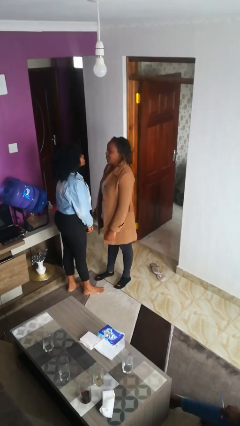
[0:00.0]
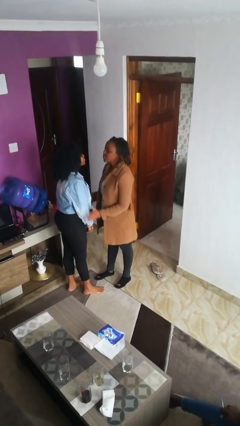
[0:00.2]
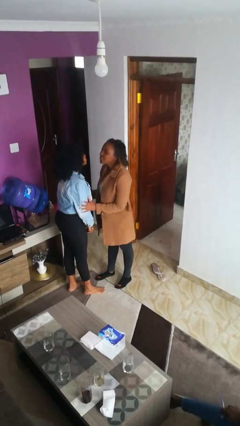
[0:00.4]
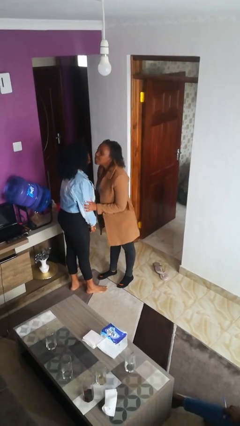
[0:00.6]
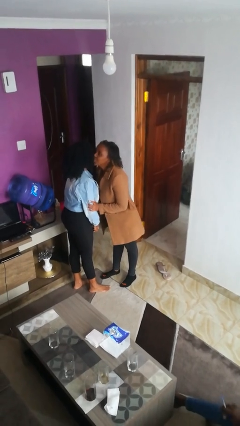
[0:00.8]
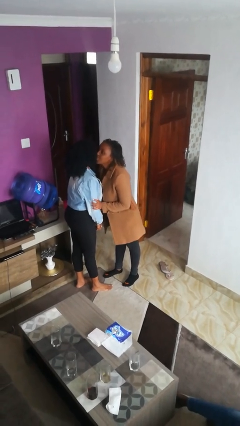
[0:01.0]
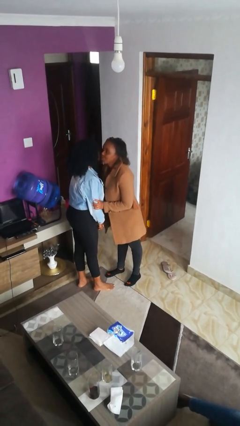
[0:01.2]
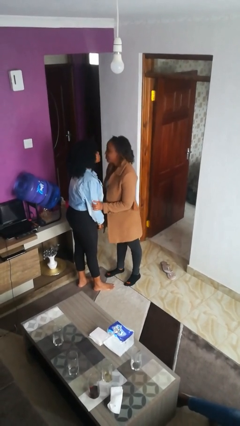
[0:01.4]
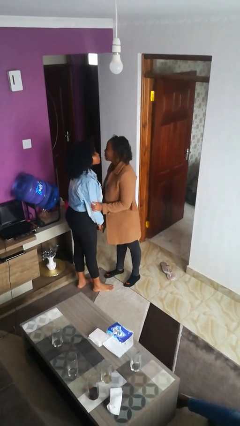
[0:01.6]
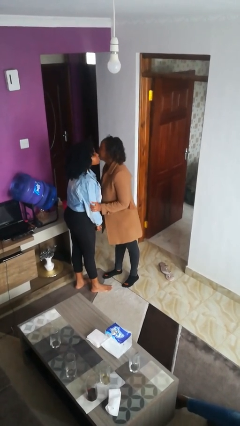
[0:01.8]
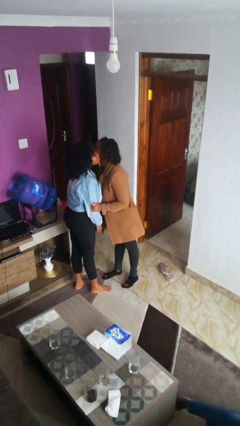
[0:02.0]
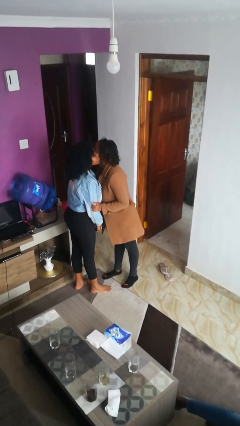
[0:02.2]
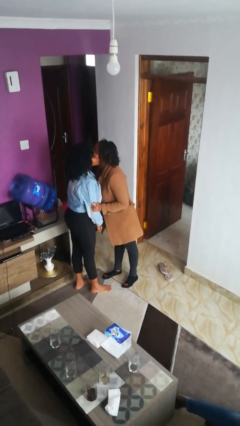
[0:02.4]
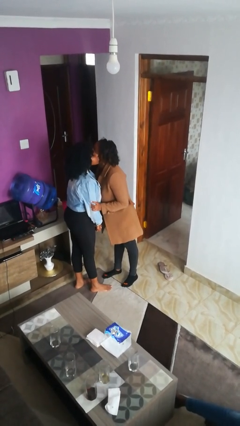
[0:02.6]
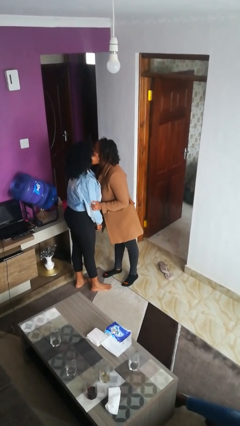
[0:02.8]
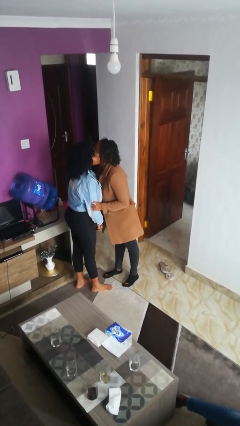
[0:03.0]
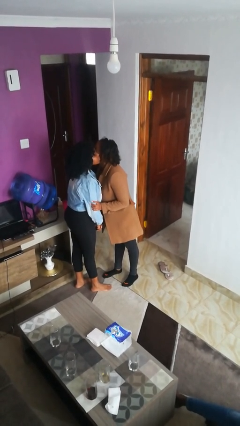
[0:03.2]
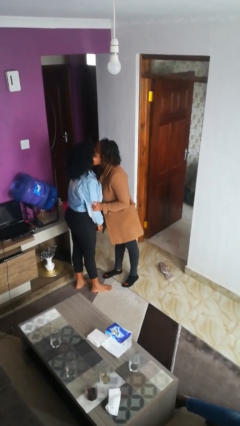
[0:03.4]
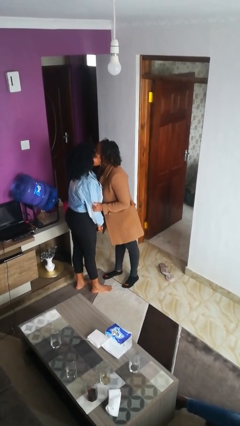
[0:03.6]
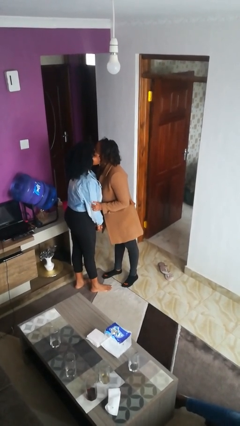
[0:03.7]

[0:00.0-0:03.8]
person kisses cheek of person

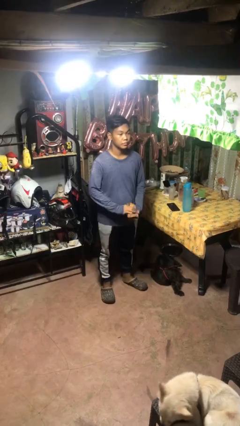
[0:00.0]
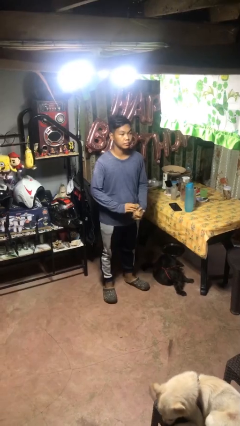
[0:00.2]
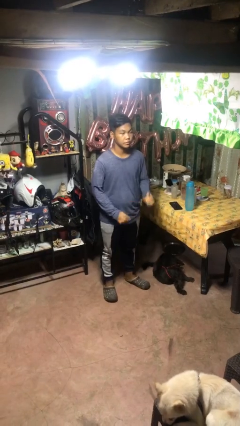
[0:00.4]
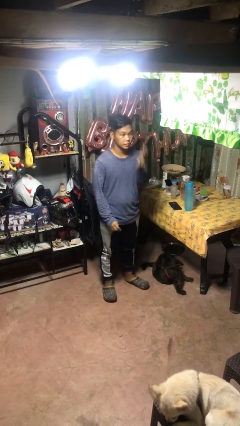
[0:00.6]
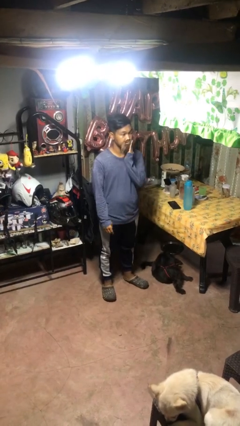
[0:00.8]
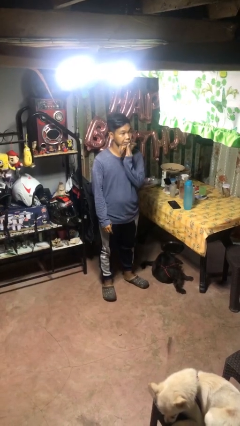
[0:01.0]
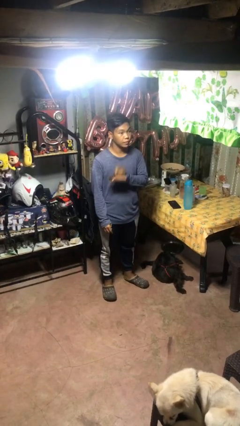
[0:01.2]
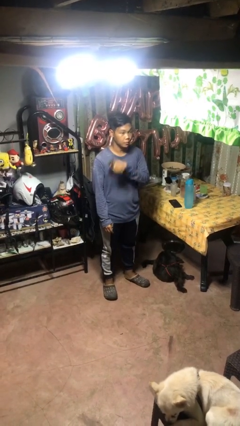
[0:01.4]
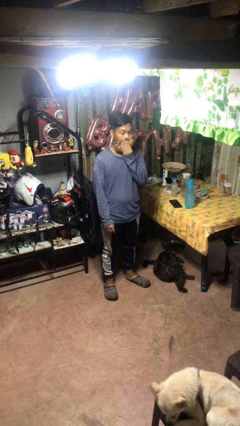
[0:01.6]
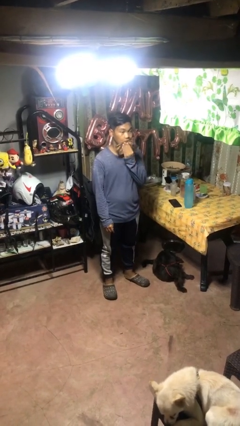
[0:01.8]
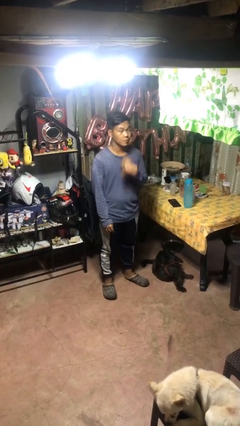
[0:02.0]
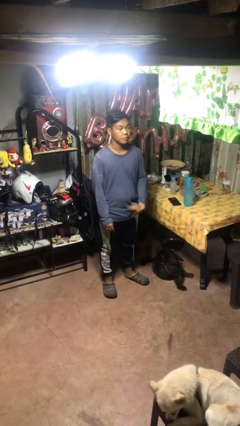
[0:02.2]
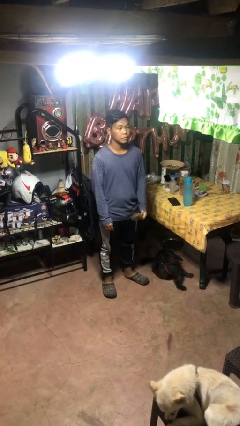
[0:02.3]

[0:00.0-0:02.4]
person wipes mouth with napkin

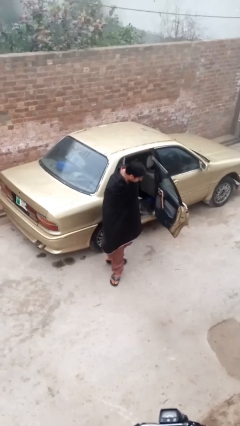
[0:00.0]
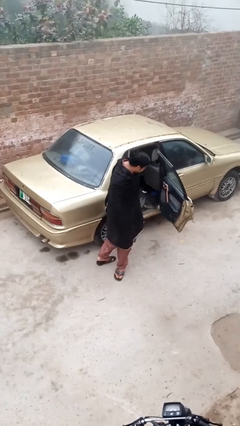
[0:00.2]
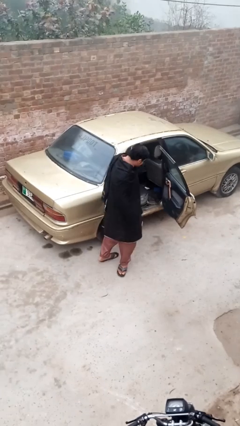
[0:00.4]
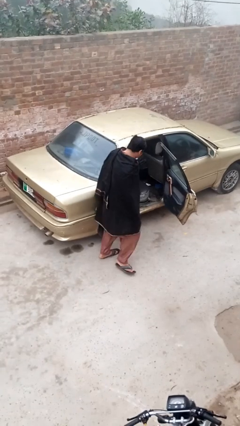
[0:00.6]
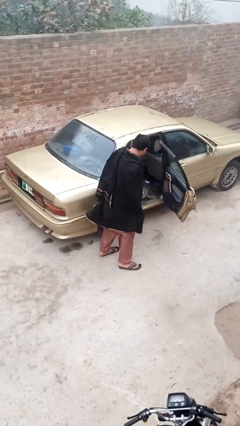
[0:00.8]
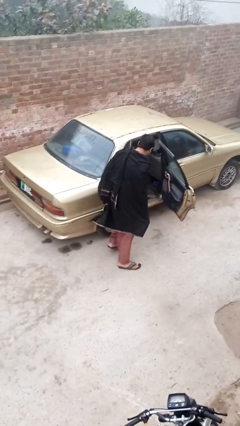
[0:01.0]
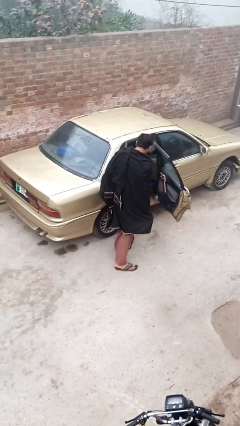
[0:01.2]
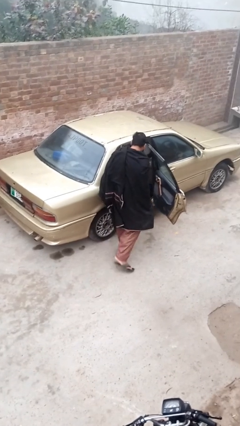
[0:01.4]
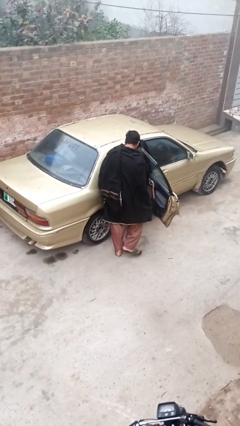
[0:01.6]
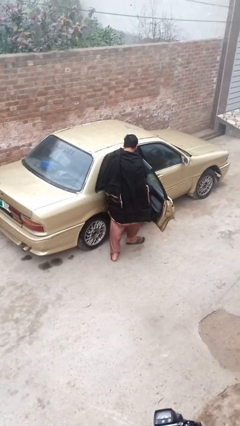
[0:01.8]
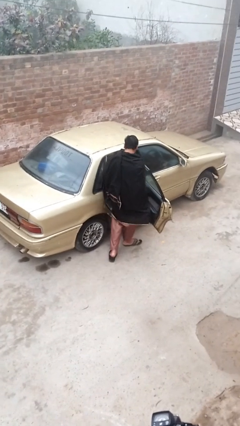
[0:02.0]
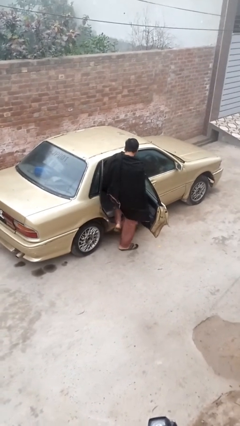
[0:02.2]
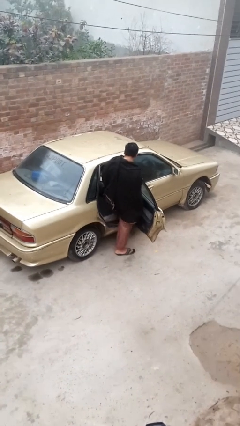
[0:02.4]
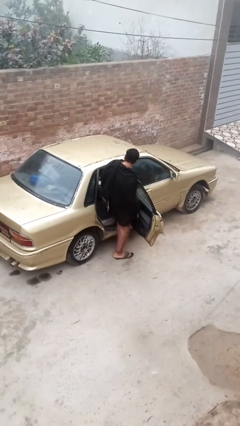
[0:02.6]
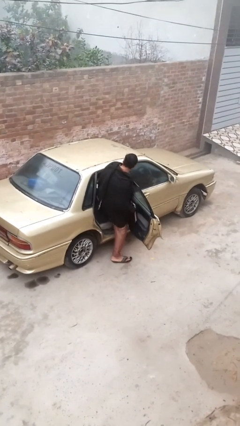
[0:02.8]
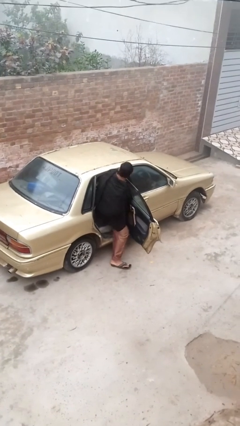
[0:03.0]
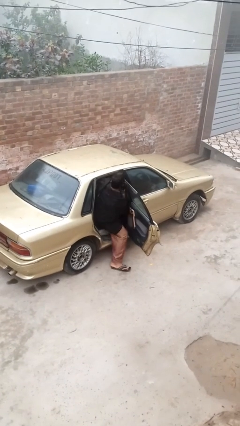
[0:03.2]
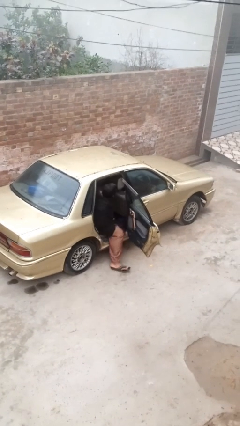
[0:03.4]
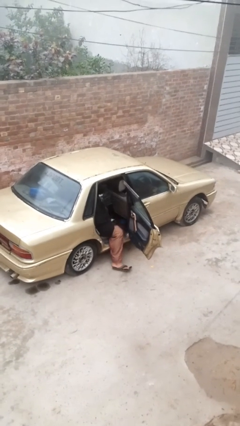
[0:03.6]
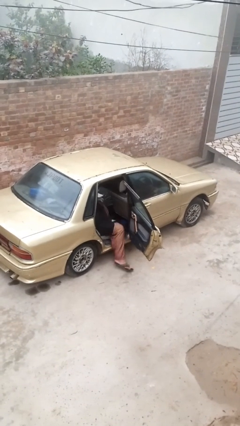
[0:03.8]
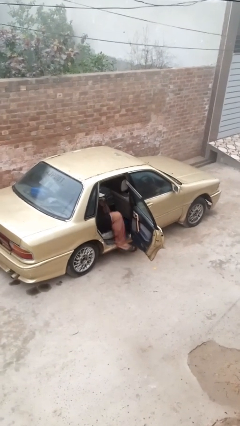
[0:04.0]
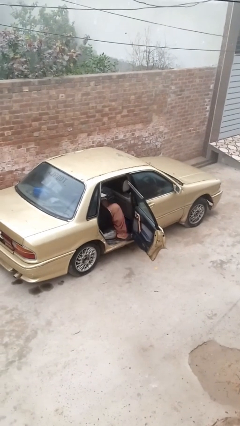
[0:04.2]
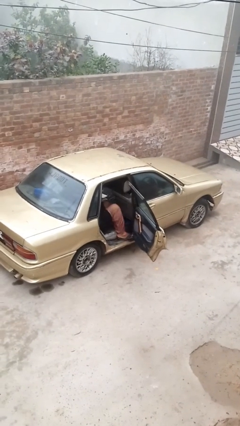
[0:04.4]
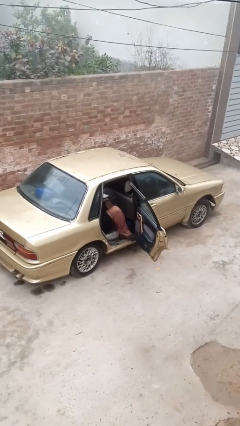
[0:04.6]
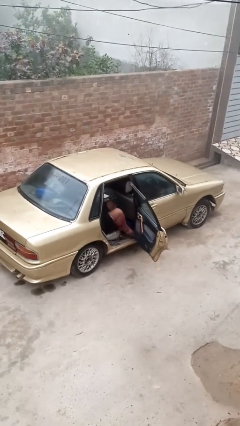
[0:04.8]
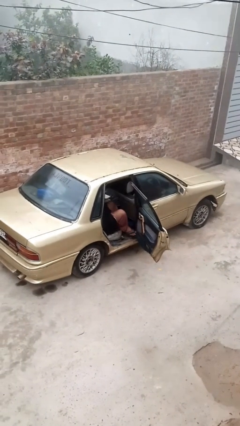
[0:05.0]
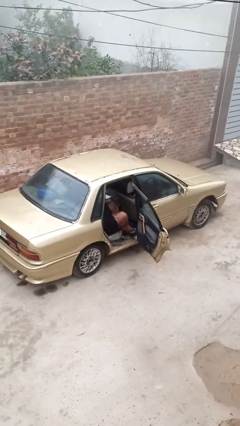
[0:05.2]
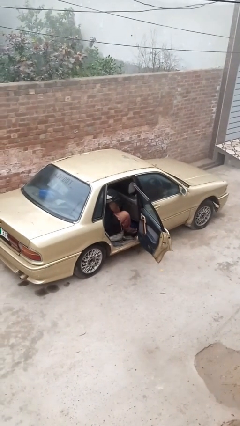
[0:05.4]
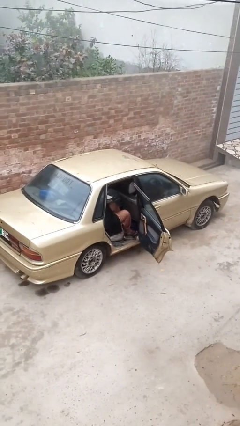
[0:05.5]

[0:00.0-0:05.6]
person enters car

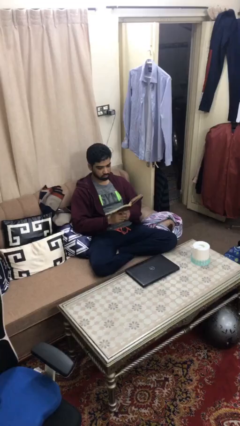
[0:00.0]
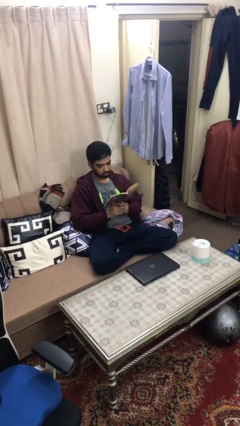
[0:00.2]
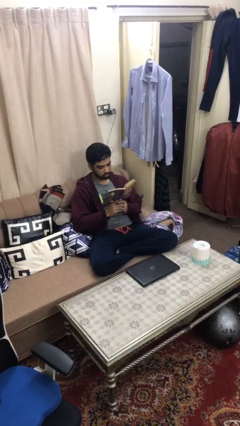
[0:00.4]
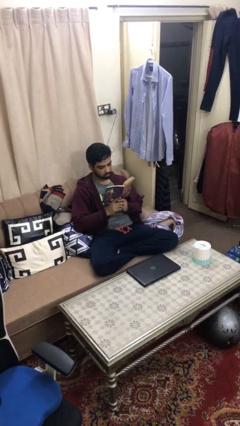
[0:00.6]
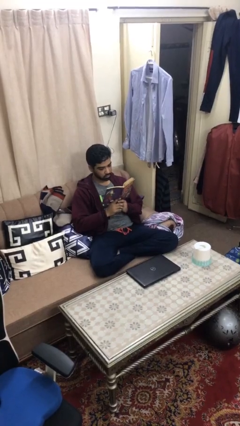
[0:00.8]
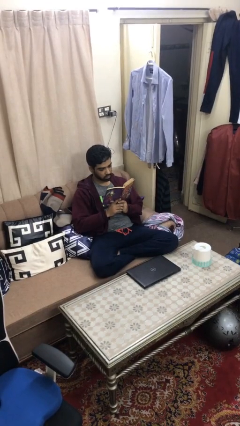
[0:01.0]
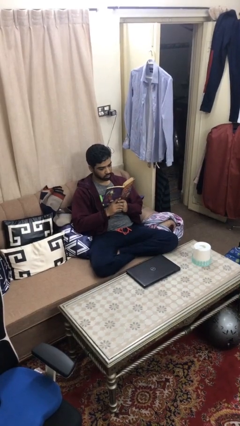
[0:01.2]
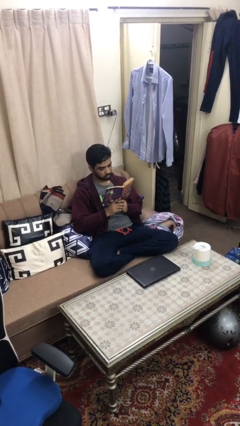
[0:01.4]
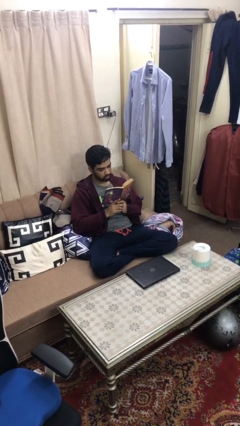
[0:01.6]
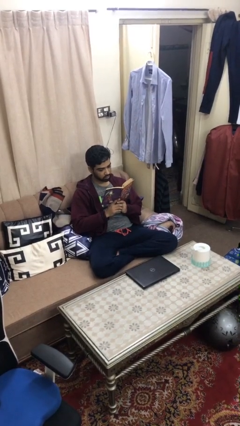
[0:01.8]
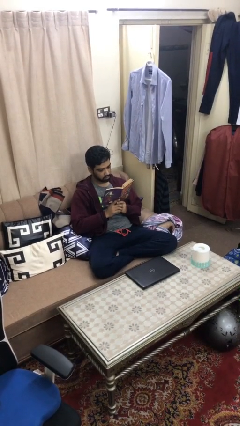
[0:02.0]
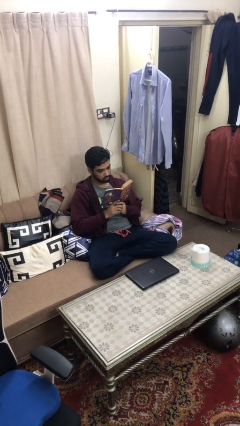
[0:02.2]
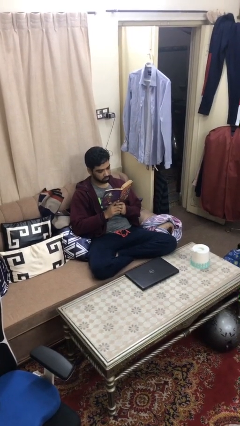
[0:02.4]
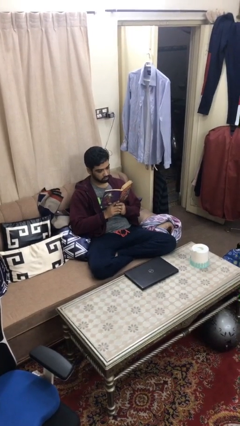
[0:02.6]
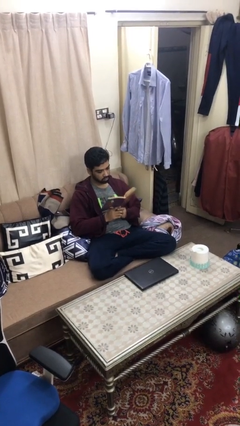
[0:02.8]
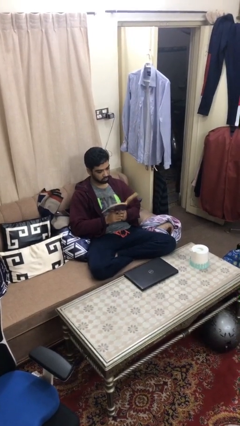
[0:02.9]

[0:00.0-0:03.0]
person reads document

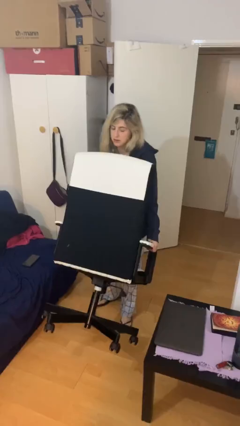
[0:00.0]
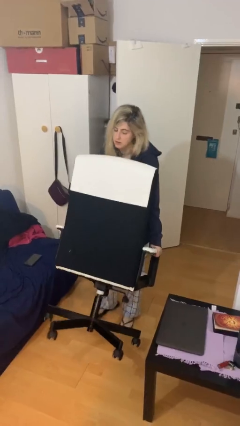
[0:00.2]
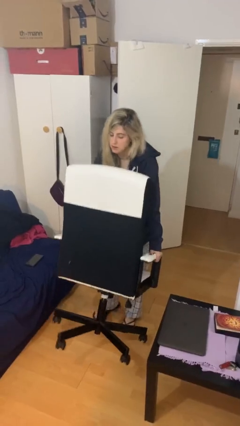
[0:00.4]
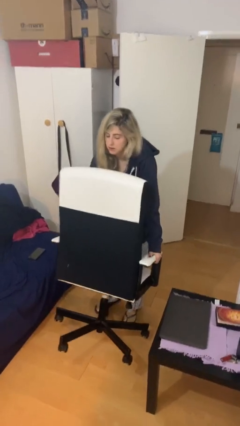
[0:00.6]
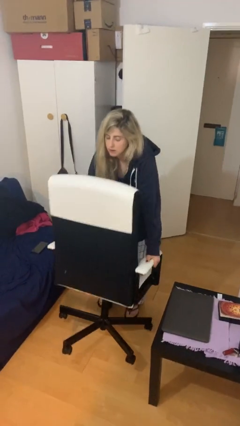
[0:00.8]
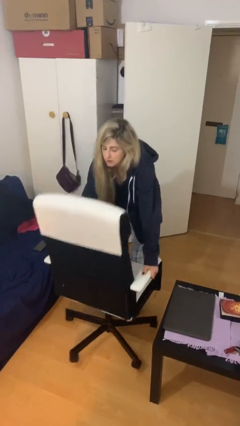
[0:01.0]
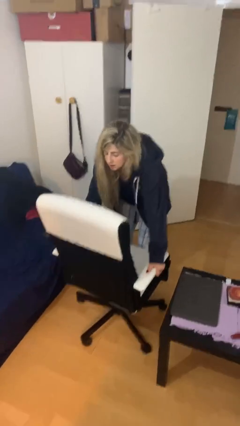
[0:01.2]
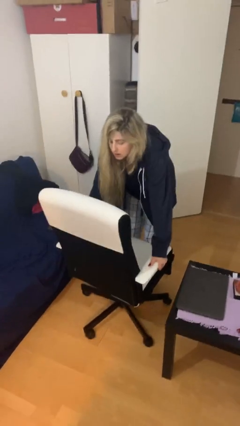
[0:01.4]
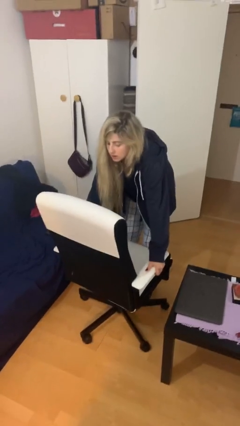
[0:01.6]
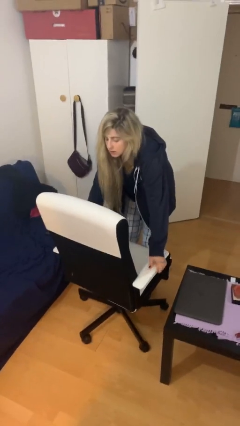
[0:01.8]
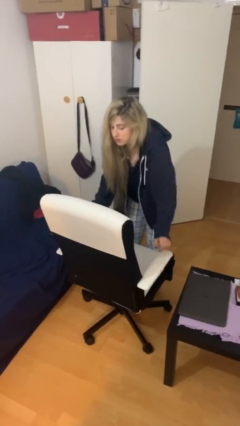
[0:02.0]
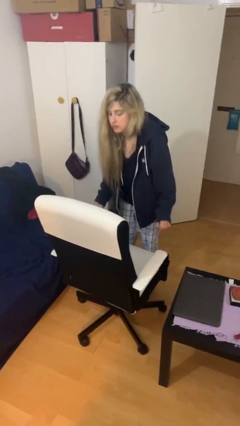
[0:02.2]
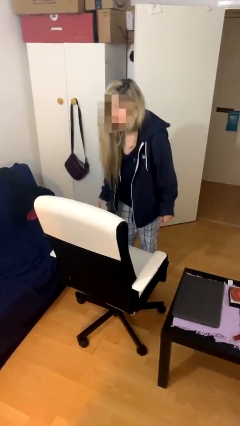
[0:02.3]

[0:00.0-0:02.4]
person puts down object on floor

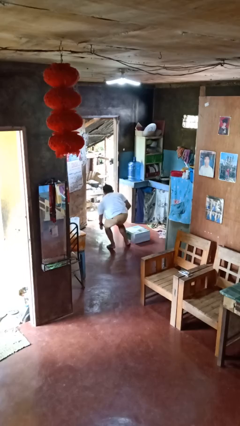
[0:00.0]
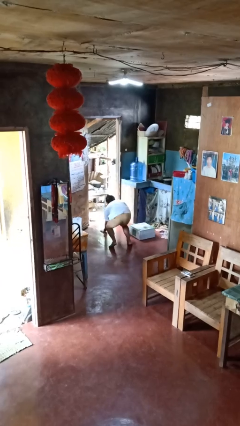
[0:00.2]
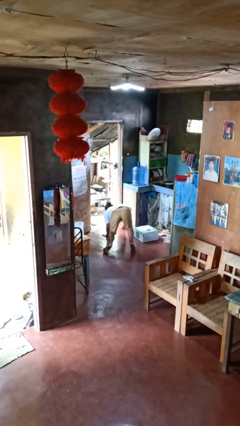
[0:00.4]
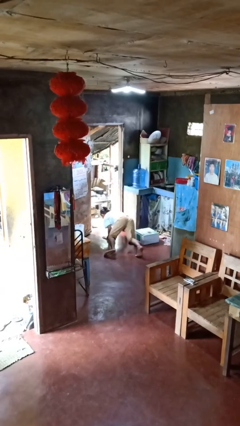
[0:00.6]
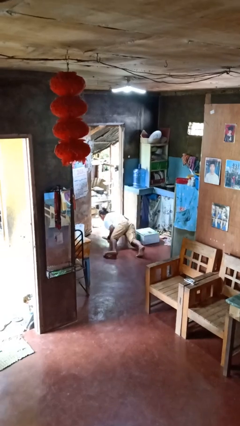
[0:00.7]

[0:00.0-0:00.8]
person trips on object on floor
